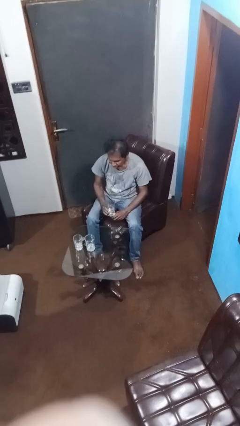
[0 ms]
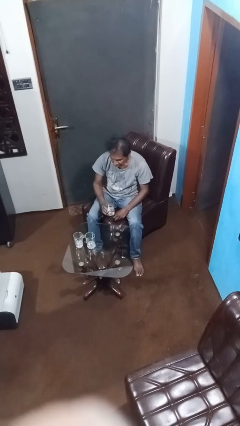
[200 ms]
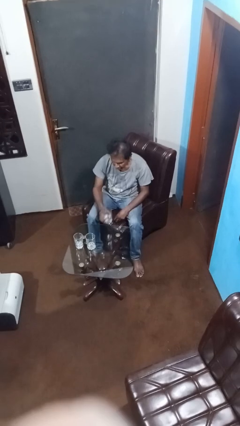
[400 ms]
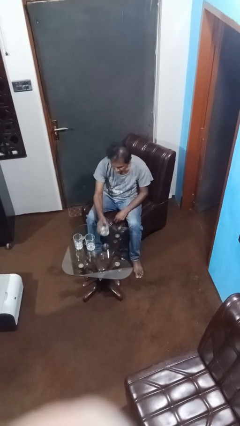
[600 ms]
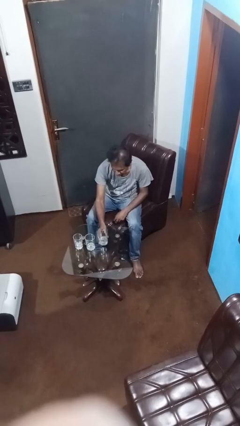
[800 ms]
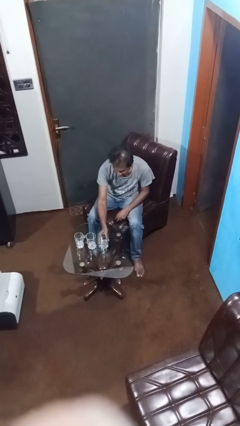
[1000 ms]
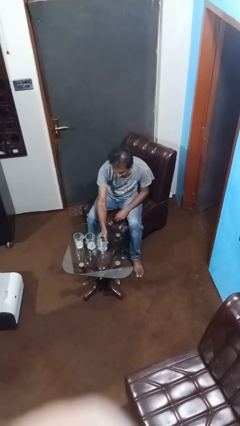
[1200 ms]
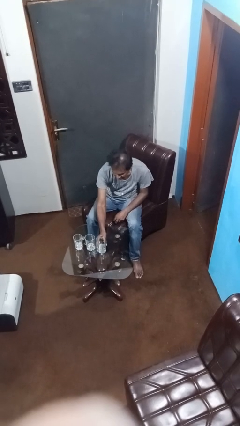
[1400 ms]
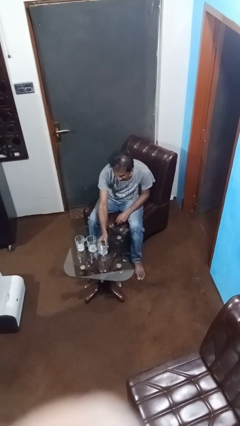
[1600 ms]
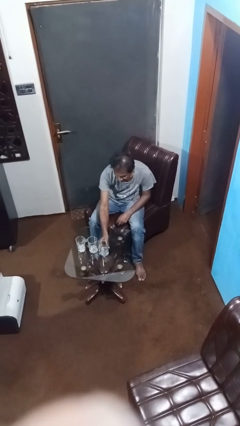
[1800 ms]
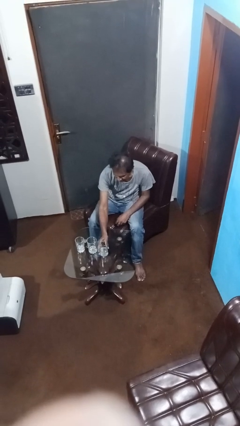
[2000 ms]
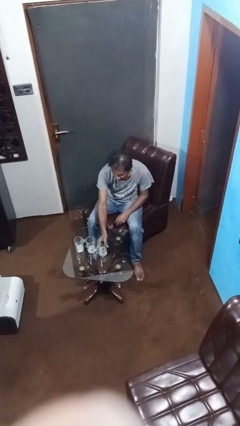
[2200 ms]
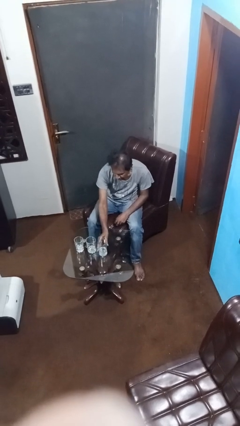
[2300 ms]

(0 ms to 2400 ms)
person puts down object on table

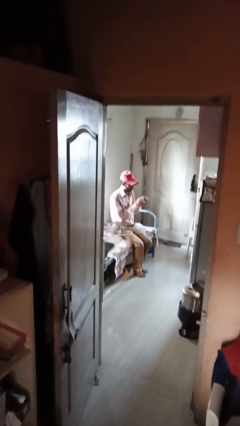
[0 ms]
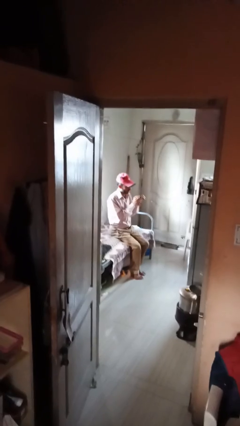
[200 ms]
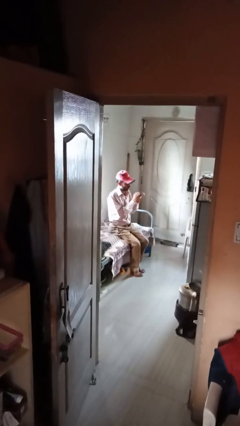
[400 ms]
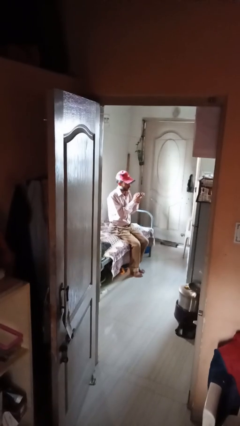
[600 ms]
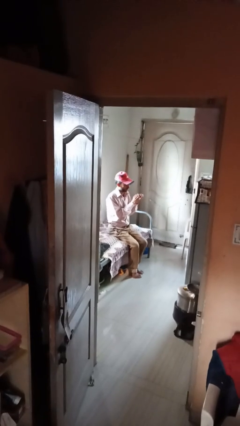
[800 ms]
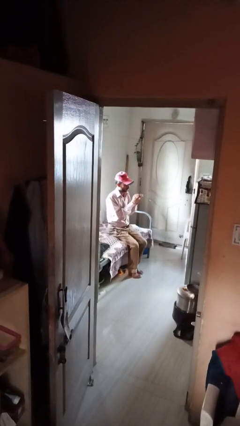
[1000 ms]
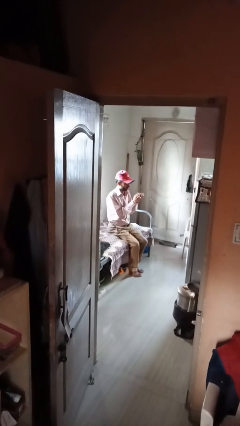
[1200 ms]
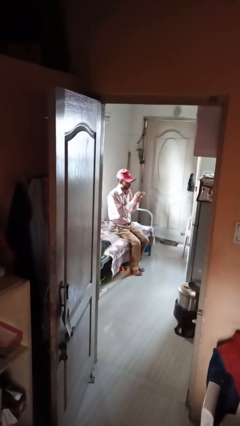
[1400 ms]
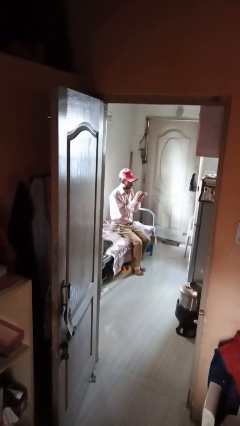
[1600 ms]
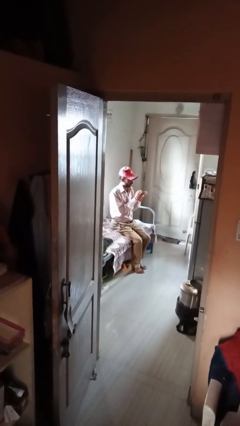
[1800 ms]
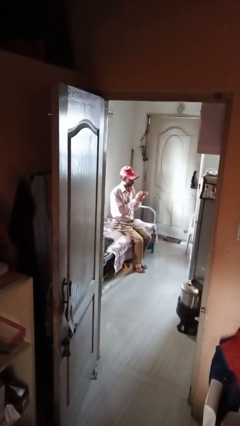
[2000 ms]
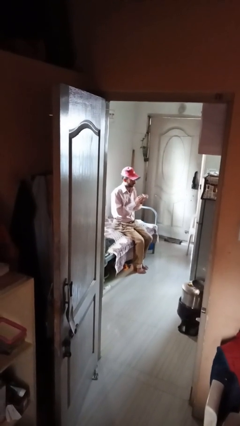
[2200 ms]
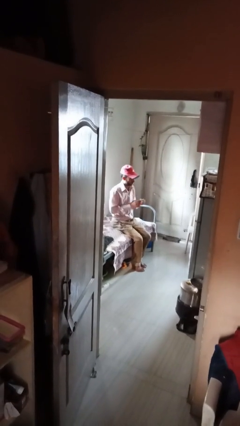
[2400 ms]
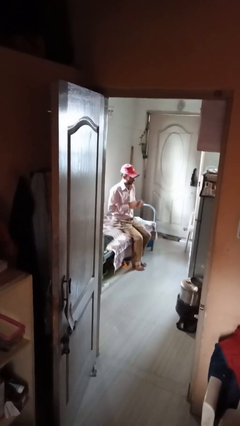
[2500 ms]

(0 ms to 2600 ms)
person files fingernails

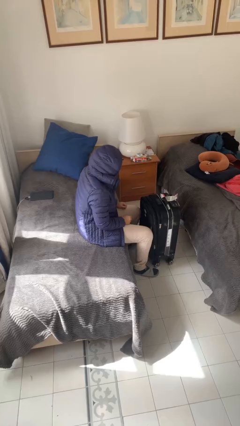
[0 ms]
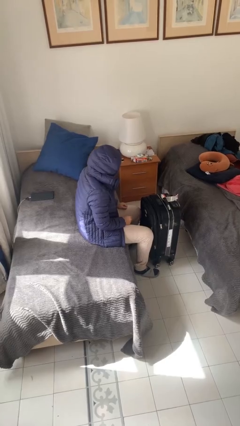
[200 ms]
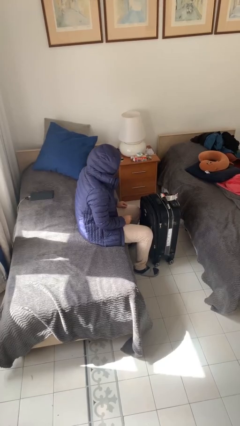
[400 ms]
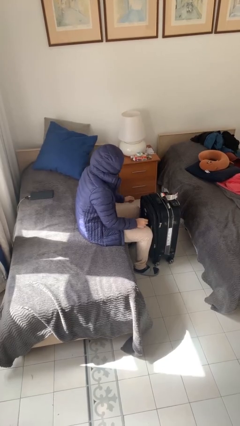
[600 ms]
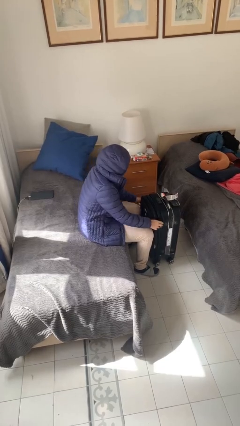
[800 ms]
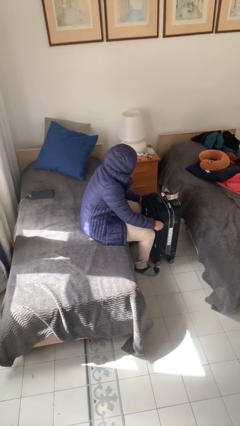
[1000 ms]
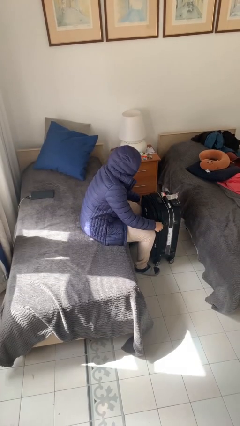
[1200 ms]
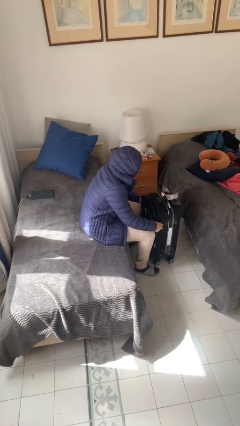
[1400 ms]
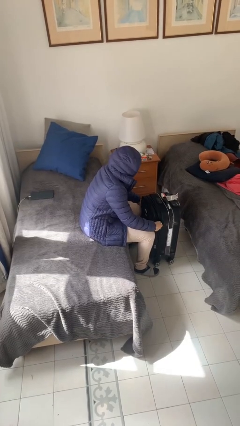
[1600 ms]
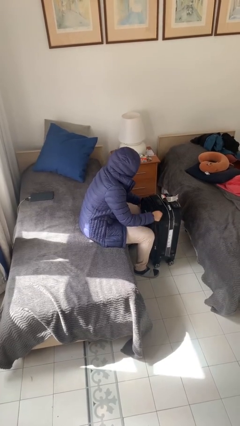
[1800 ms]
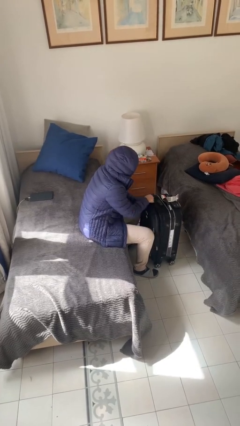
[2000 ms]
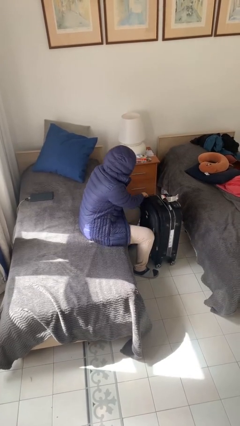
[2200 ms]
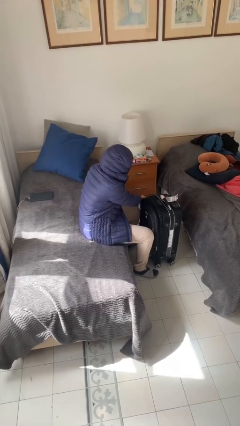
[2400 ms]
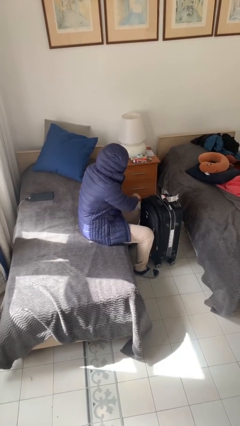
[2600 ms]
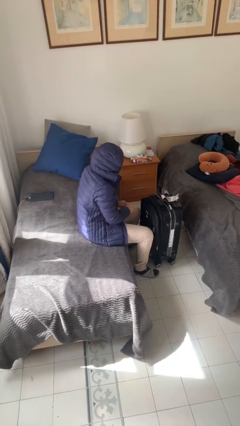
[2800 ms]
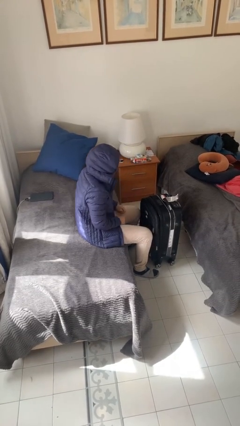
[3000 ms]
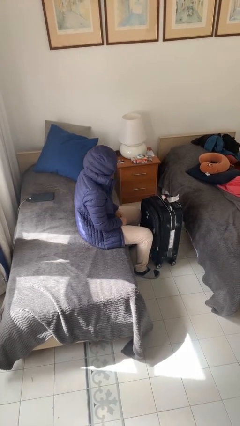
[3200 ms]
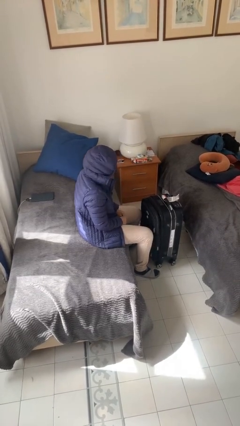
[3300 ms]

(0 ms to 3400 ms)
person closes suitcase

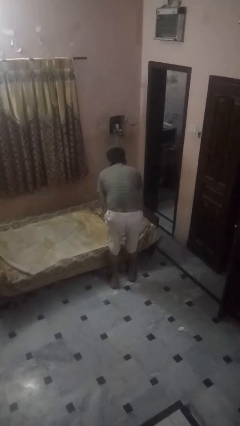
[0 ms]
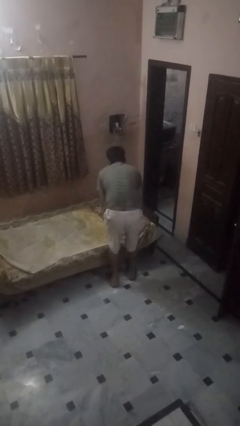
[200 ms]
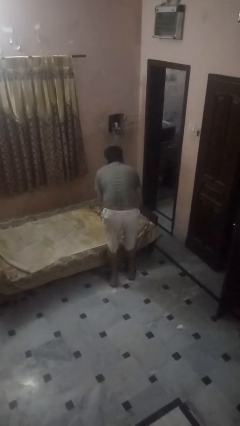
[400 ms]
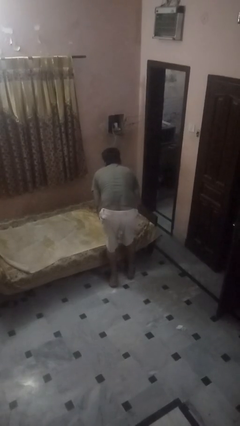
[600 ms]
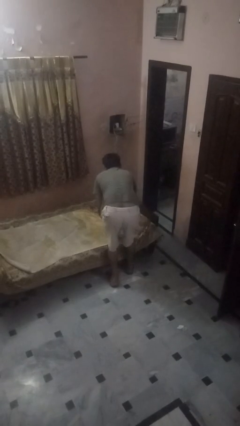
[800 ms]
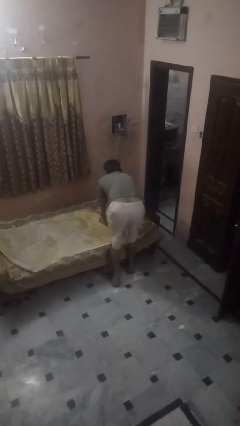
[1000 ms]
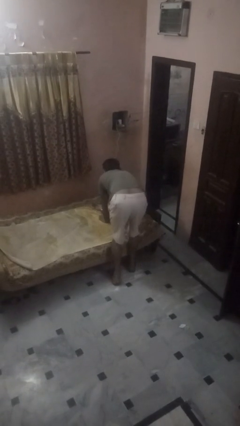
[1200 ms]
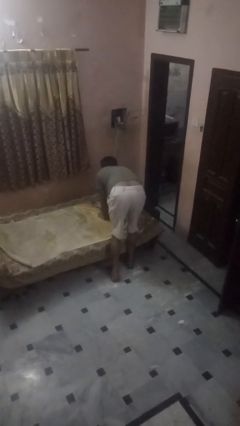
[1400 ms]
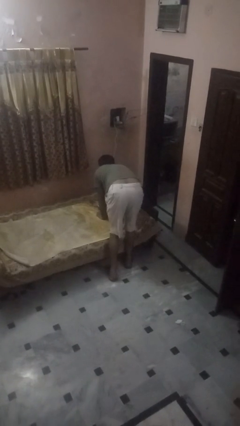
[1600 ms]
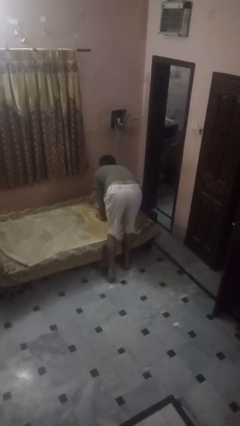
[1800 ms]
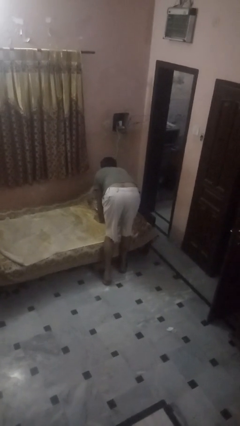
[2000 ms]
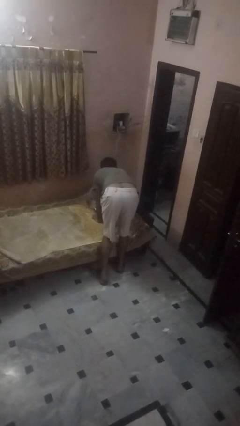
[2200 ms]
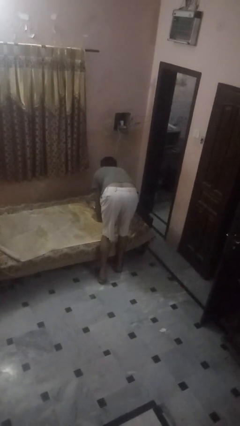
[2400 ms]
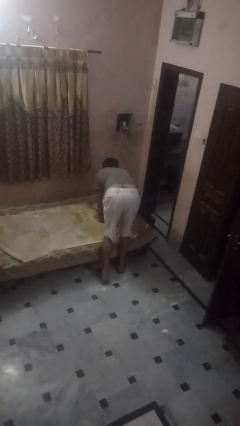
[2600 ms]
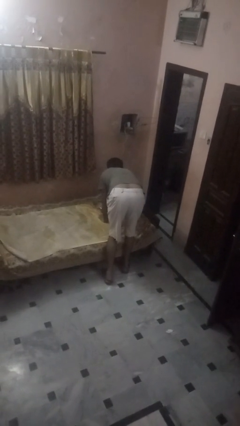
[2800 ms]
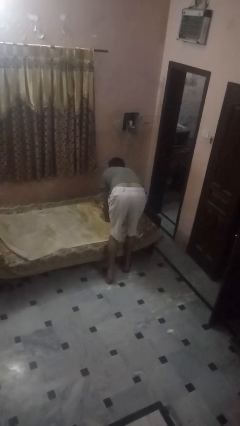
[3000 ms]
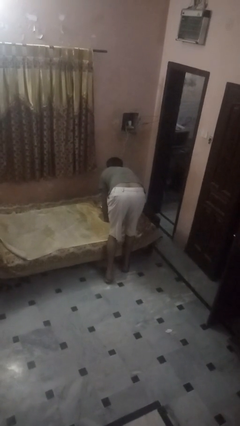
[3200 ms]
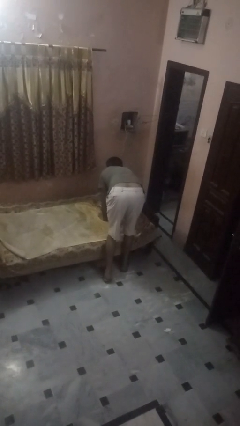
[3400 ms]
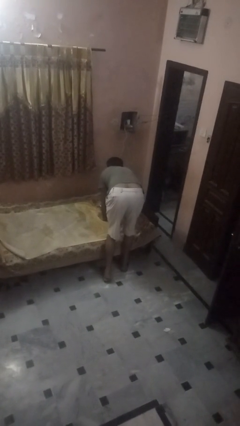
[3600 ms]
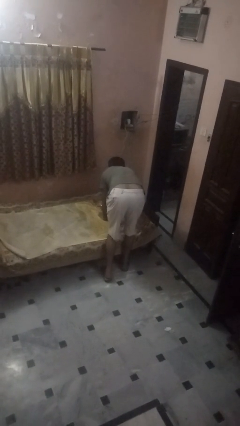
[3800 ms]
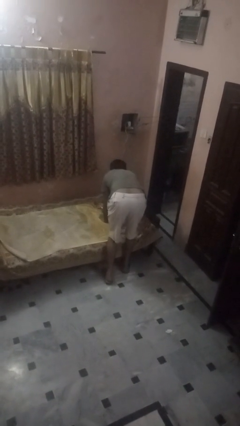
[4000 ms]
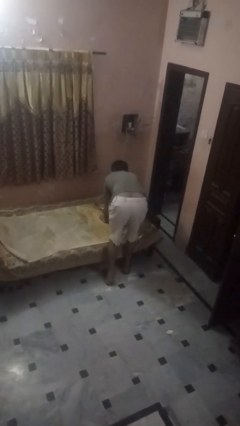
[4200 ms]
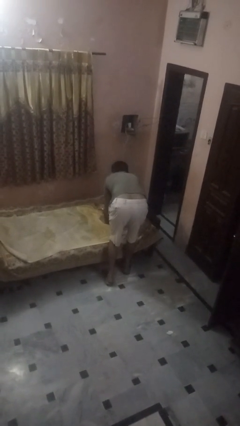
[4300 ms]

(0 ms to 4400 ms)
person makes bed

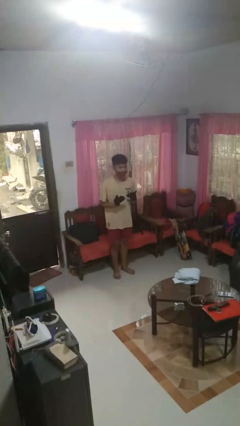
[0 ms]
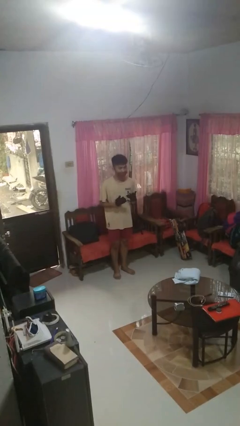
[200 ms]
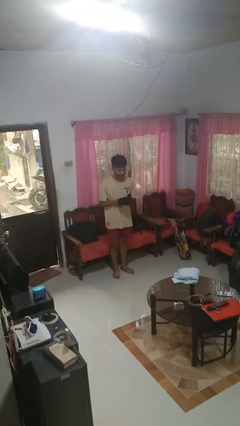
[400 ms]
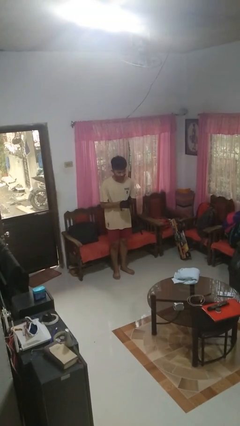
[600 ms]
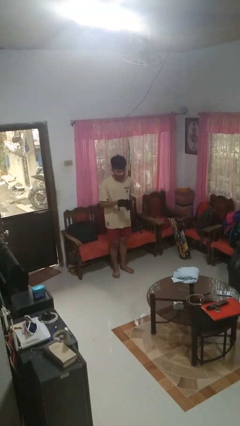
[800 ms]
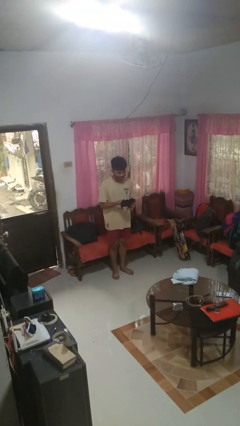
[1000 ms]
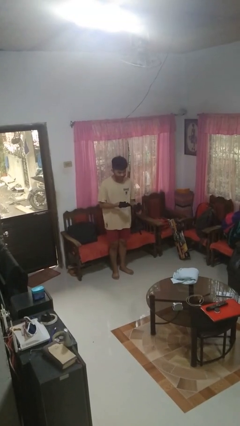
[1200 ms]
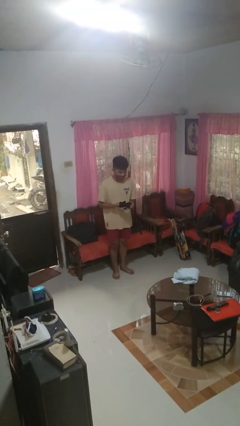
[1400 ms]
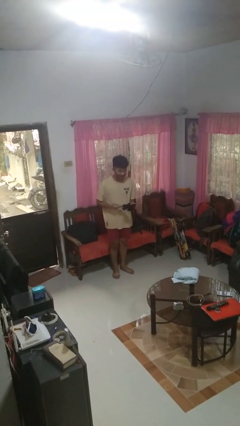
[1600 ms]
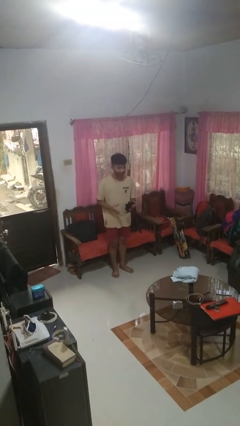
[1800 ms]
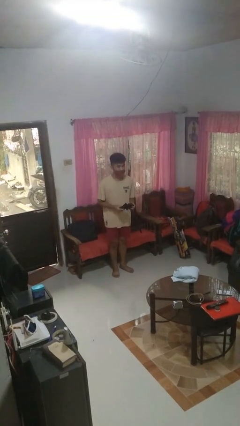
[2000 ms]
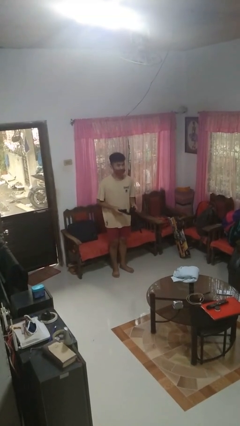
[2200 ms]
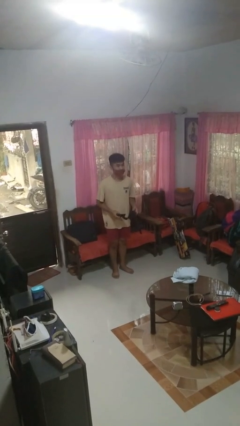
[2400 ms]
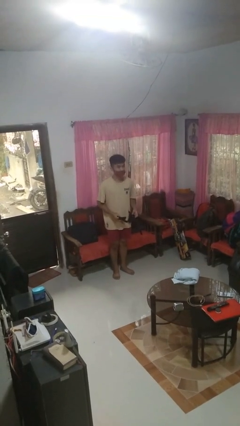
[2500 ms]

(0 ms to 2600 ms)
person takes off gloves

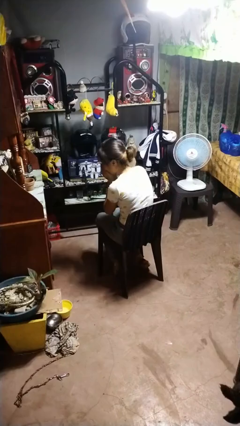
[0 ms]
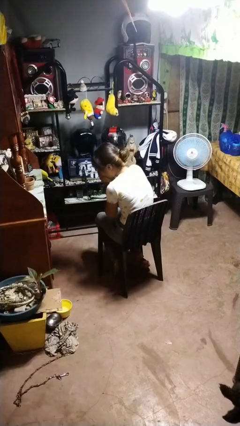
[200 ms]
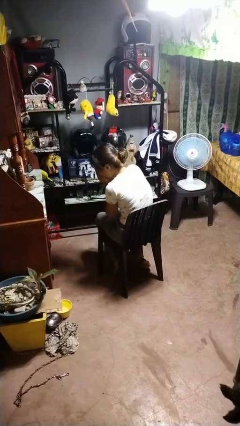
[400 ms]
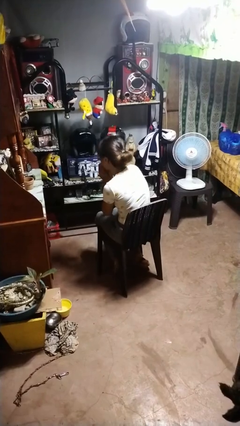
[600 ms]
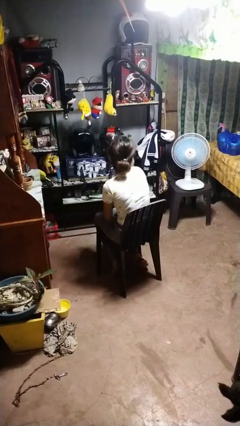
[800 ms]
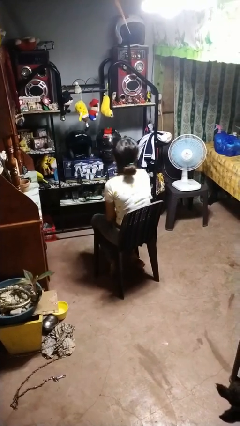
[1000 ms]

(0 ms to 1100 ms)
person sneezes into hand

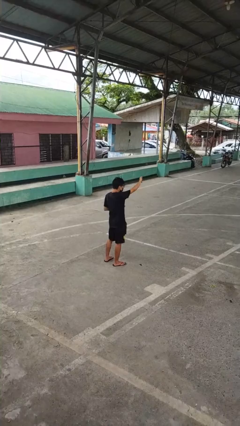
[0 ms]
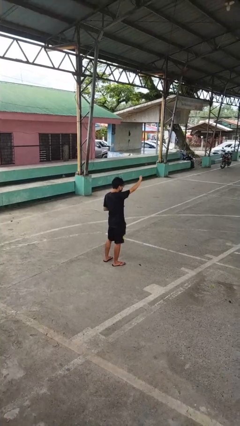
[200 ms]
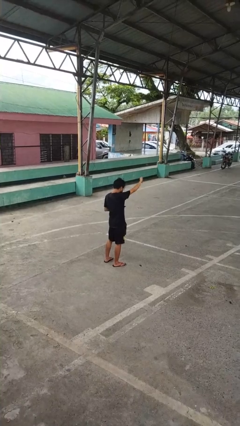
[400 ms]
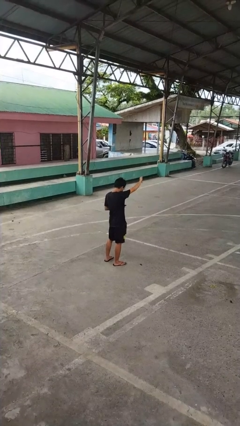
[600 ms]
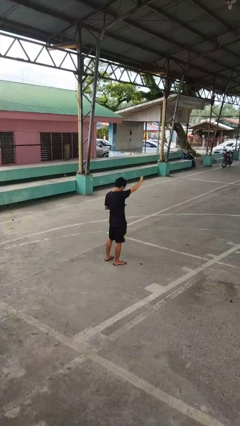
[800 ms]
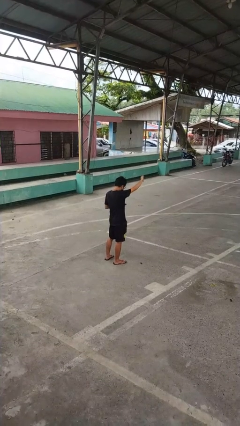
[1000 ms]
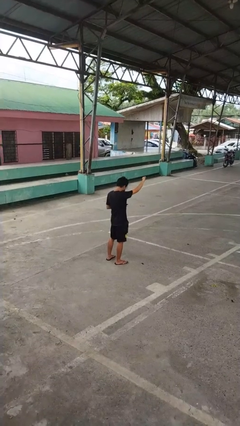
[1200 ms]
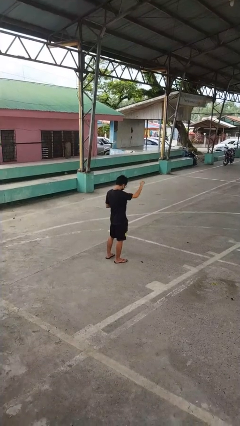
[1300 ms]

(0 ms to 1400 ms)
person gestures thumbs down
